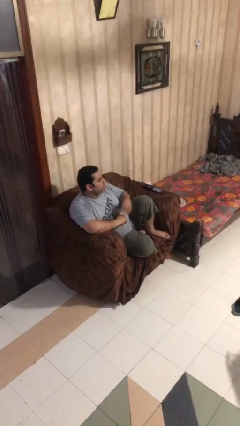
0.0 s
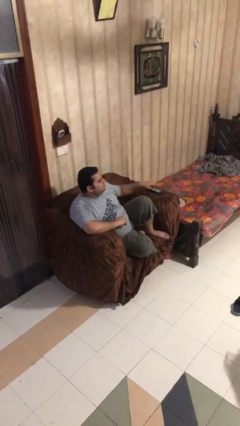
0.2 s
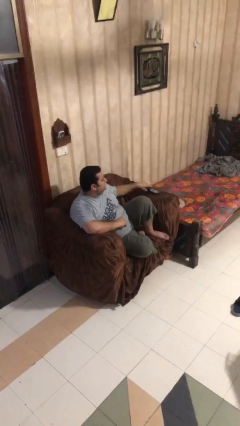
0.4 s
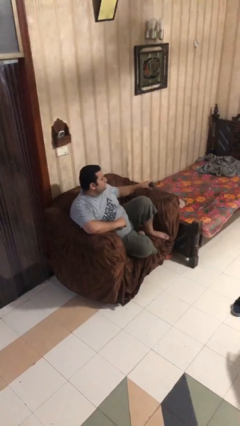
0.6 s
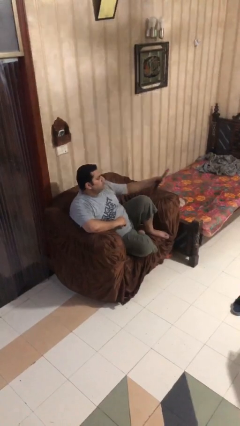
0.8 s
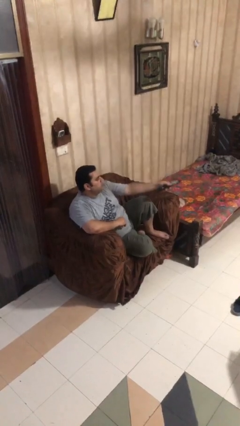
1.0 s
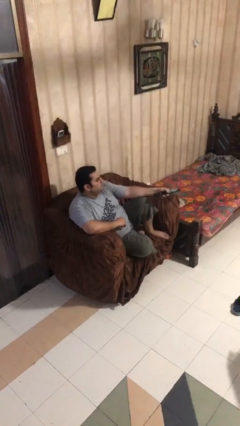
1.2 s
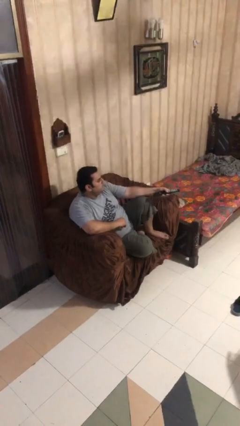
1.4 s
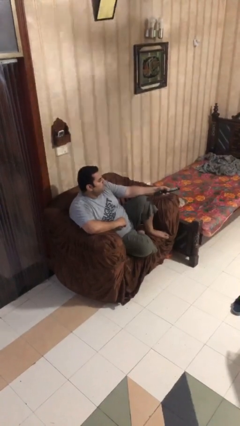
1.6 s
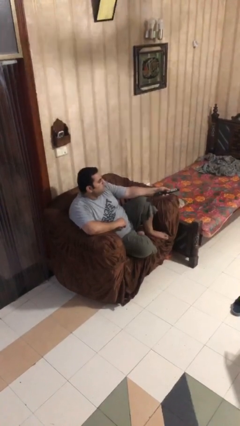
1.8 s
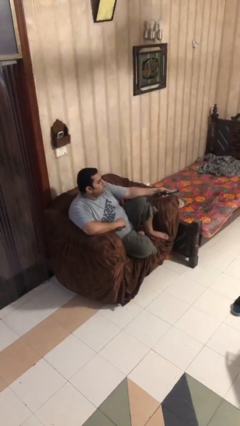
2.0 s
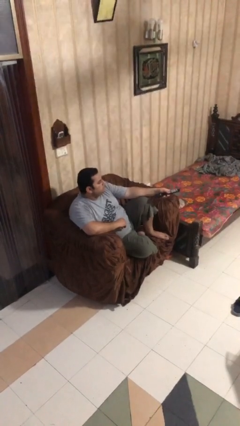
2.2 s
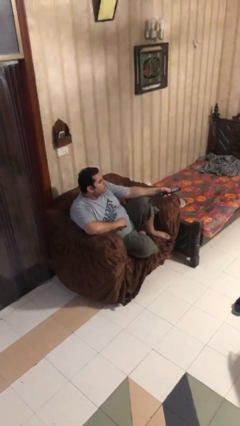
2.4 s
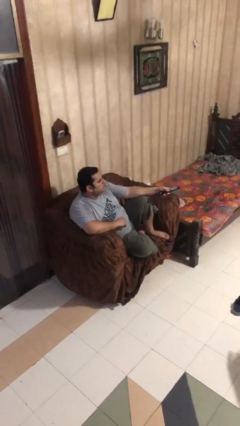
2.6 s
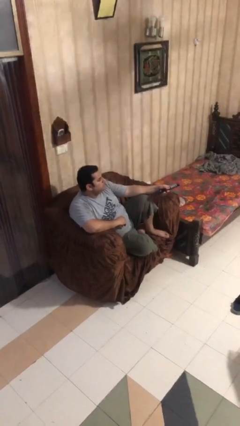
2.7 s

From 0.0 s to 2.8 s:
person uses television remote

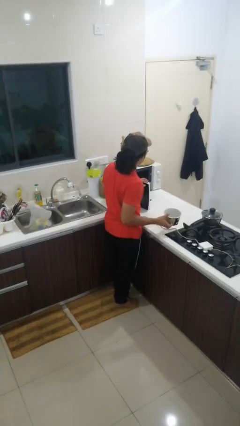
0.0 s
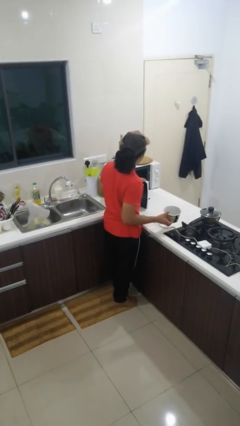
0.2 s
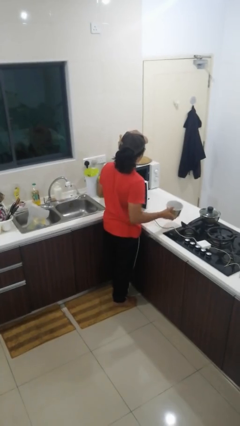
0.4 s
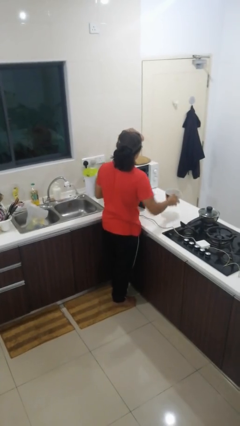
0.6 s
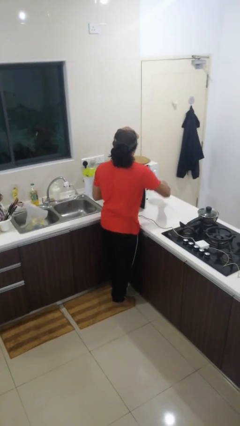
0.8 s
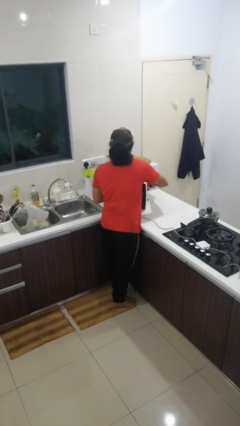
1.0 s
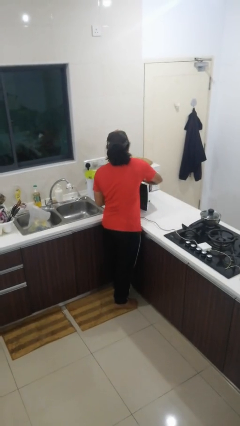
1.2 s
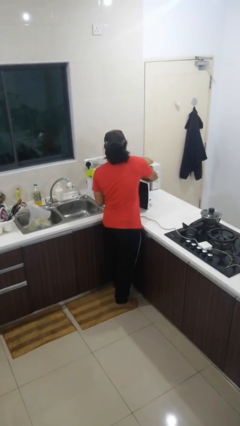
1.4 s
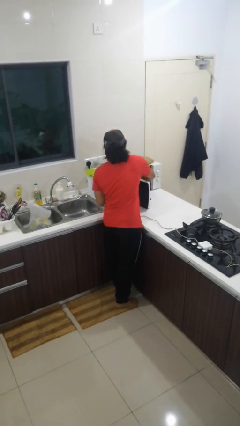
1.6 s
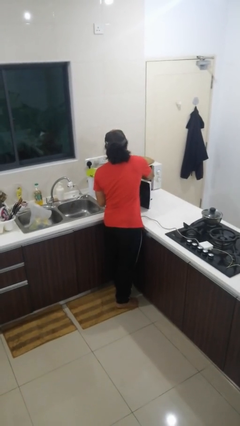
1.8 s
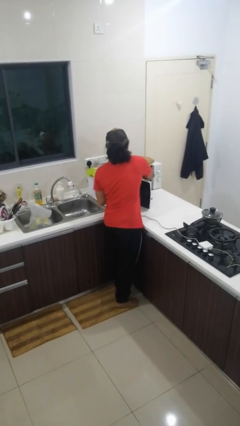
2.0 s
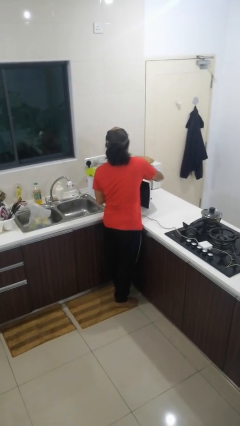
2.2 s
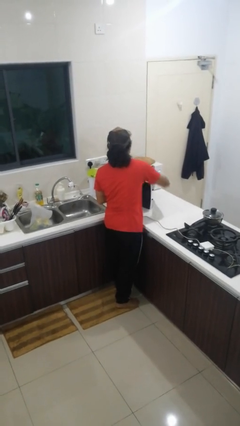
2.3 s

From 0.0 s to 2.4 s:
person puts object into microwave

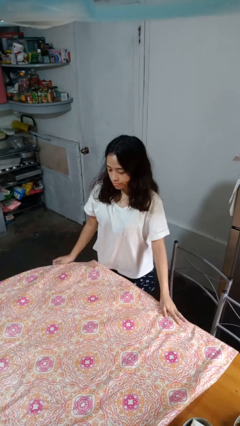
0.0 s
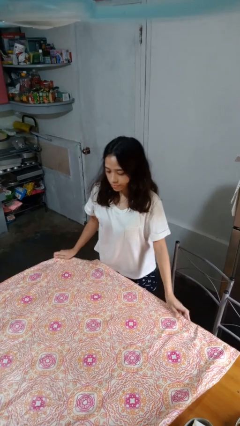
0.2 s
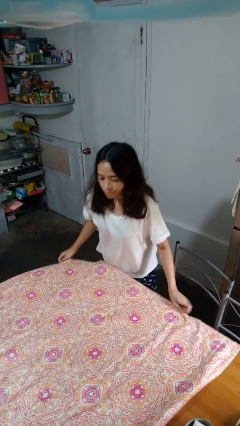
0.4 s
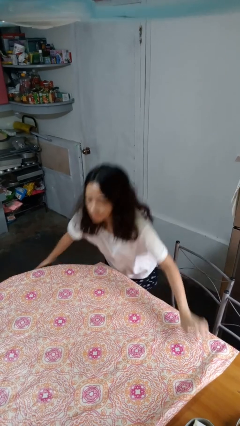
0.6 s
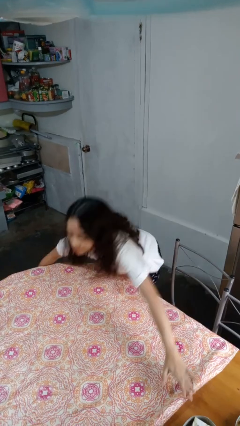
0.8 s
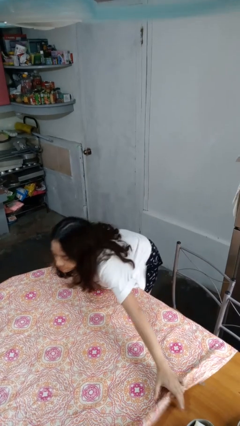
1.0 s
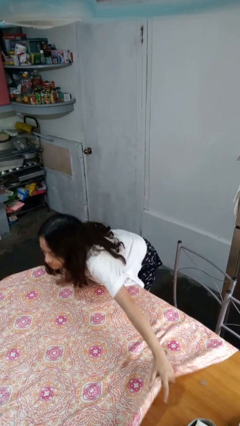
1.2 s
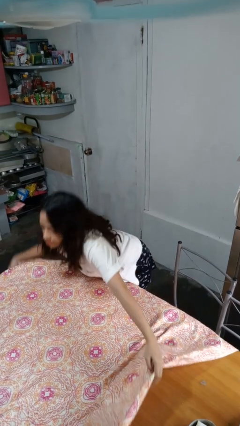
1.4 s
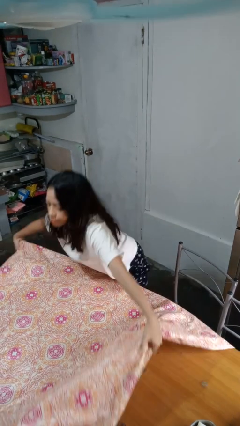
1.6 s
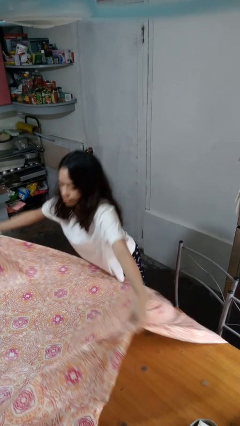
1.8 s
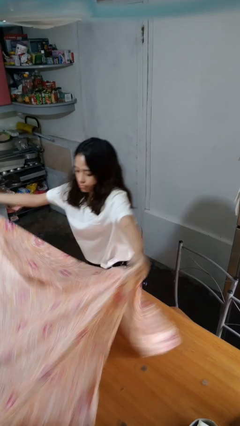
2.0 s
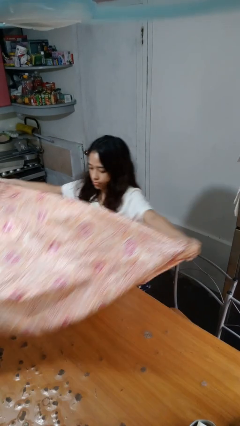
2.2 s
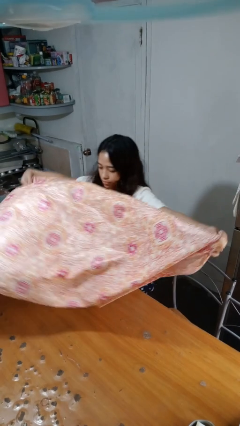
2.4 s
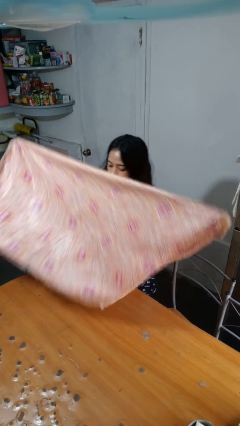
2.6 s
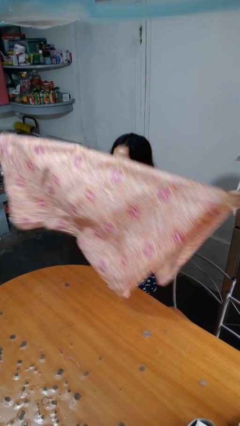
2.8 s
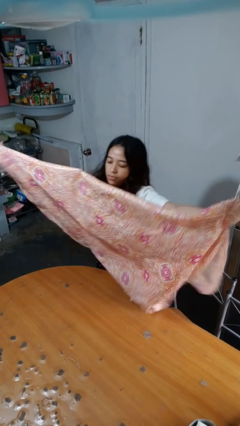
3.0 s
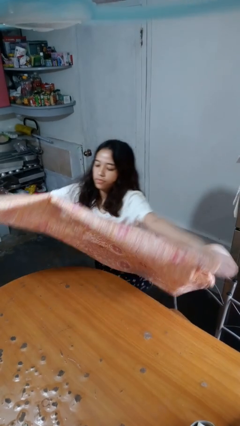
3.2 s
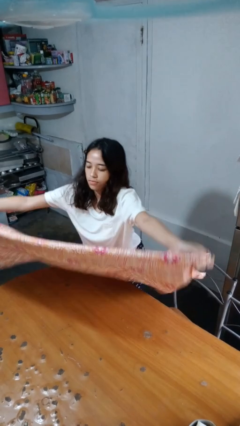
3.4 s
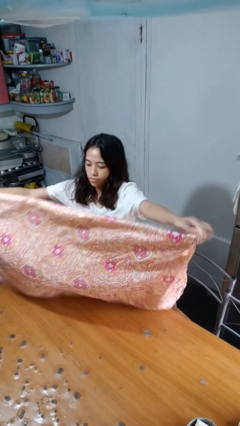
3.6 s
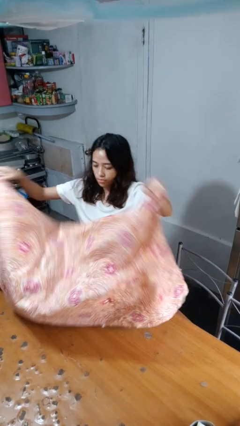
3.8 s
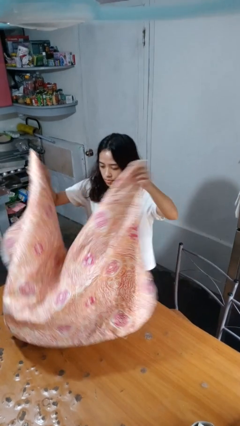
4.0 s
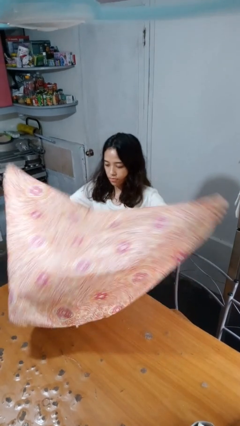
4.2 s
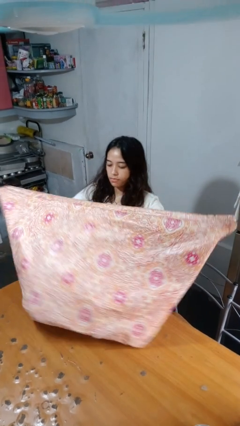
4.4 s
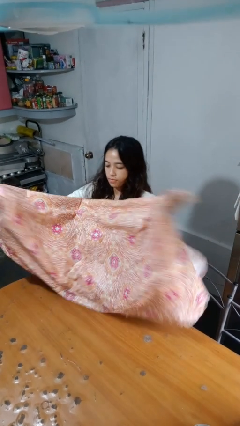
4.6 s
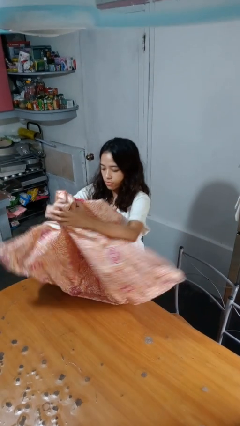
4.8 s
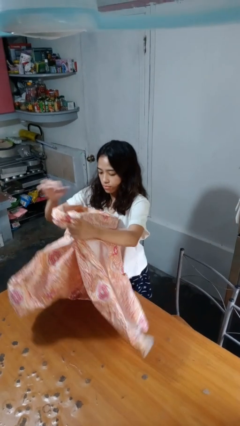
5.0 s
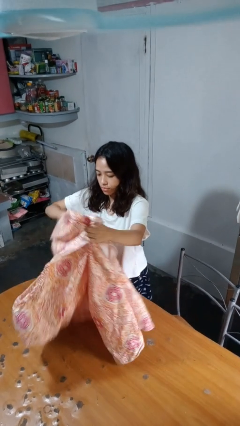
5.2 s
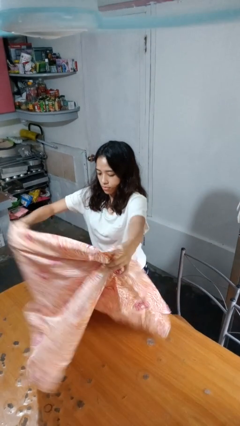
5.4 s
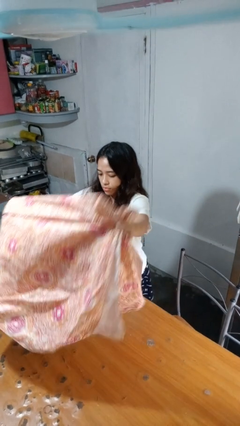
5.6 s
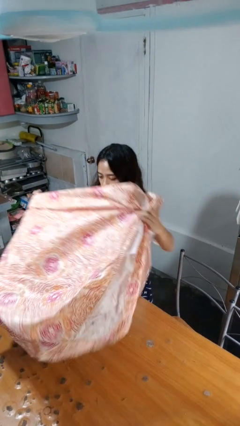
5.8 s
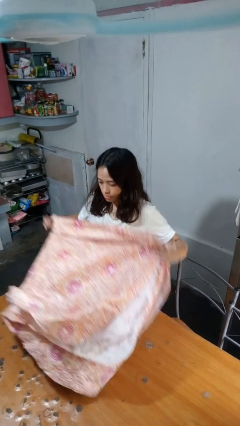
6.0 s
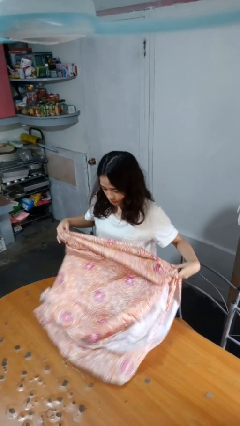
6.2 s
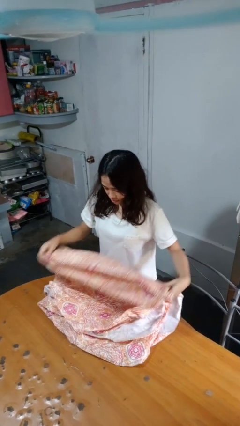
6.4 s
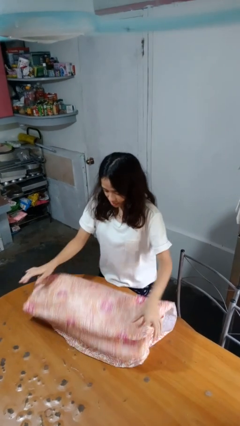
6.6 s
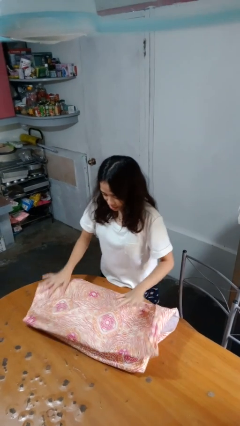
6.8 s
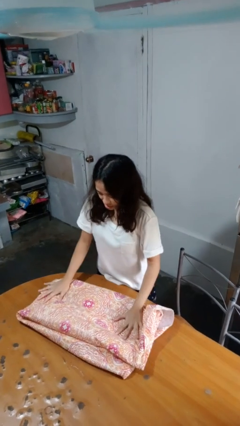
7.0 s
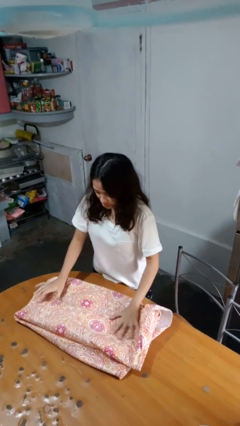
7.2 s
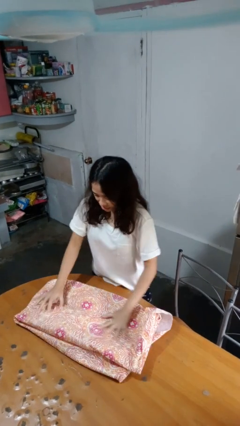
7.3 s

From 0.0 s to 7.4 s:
person folds tablecloth

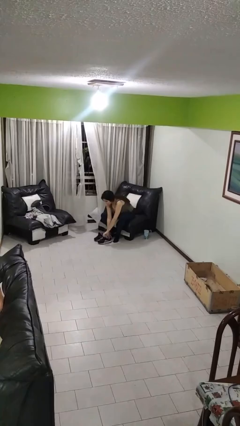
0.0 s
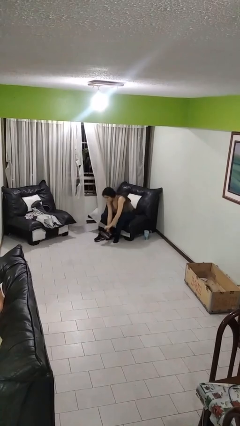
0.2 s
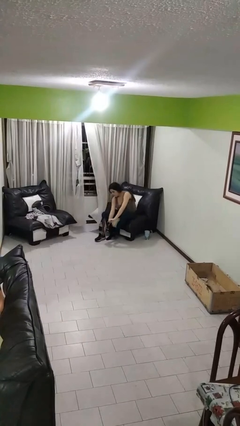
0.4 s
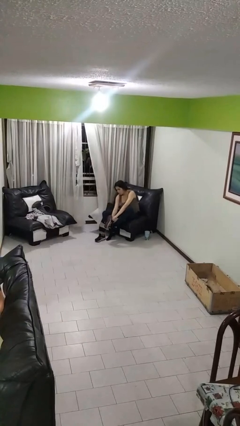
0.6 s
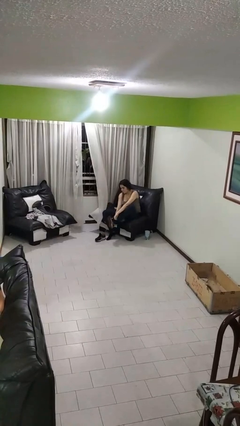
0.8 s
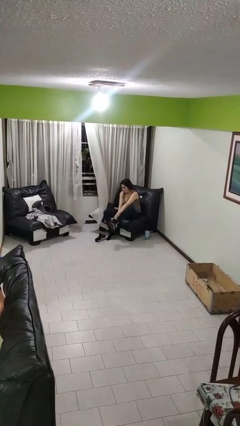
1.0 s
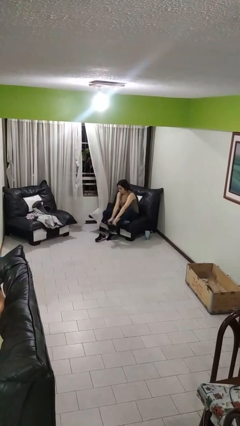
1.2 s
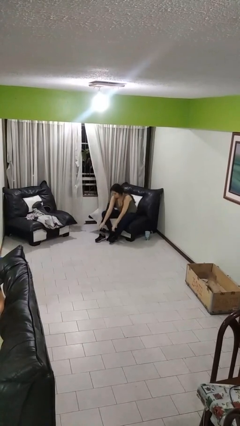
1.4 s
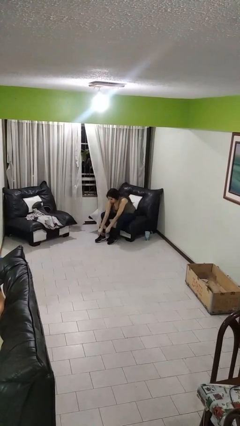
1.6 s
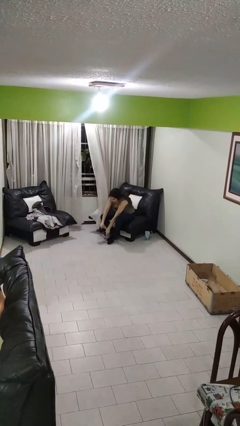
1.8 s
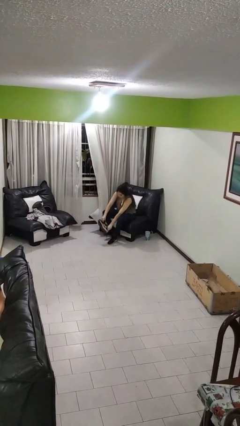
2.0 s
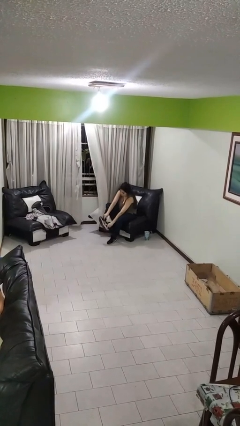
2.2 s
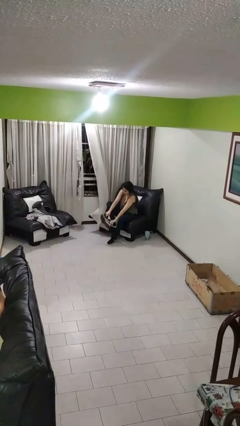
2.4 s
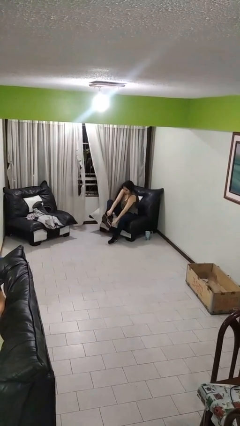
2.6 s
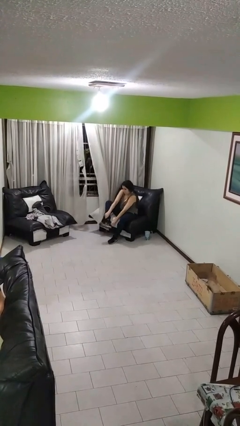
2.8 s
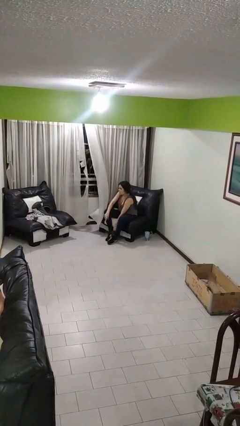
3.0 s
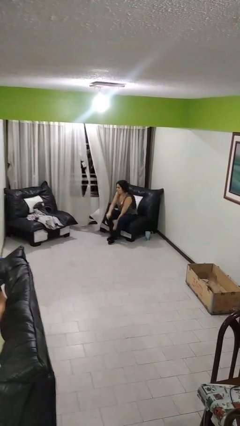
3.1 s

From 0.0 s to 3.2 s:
person puts on shoes

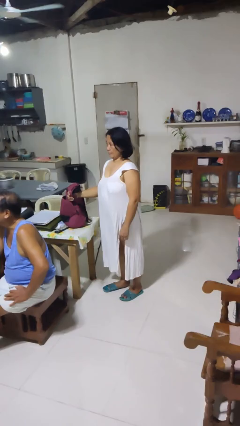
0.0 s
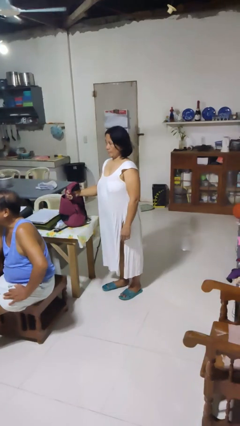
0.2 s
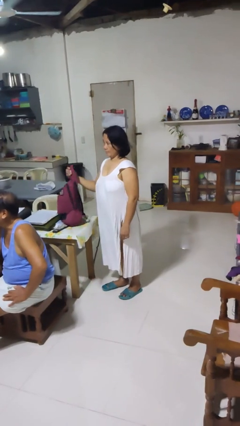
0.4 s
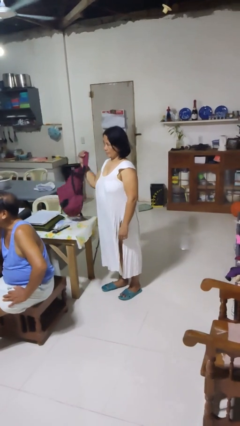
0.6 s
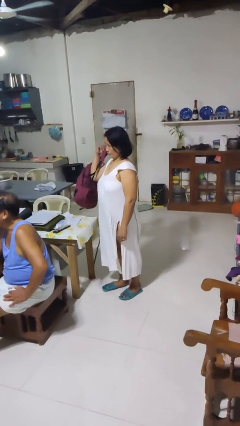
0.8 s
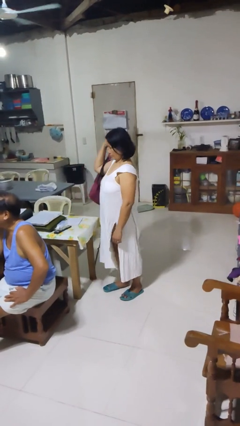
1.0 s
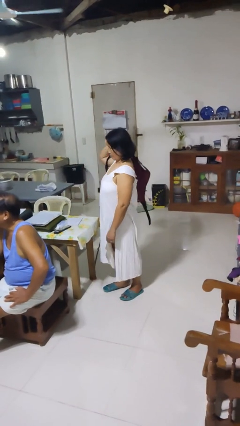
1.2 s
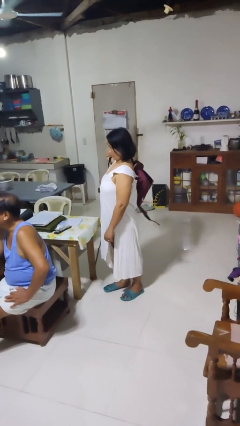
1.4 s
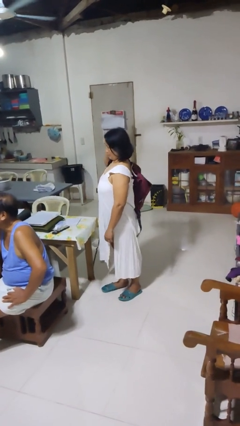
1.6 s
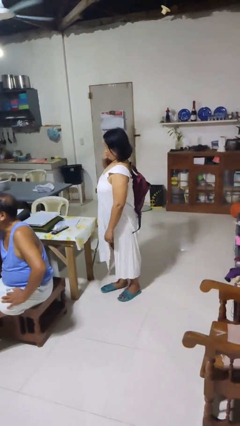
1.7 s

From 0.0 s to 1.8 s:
person puts on backpack

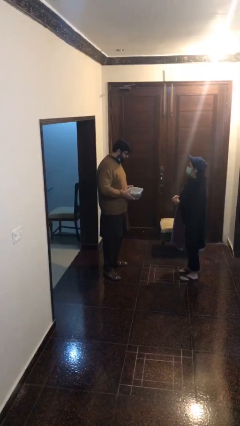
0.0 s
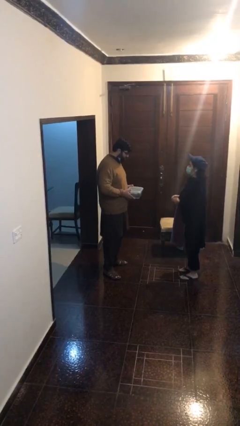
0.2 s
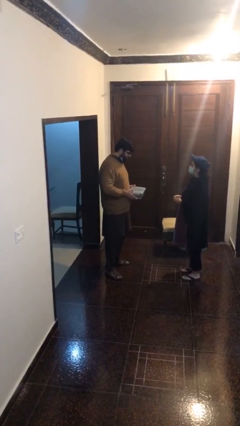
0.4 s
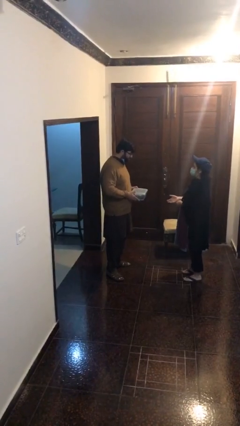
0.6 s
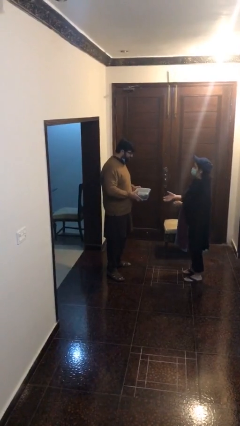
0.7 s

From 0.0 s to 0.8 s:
person transfers object to person
